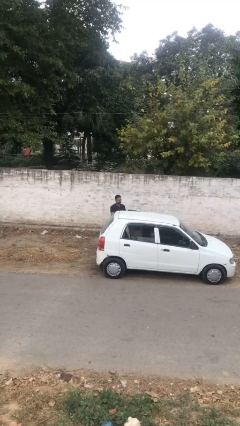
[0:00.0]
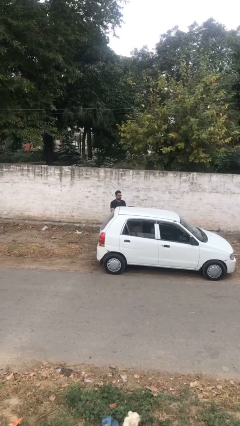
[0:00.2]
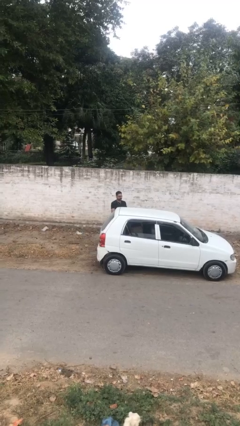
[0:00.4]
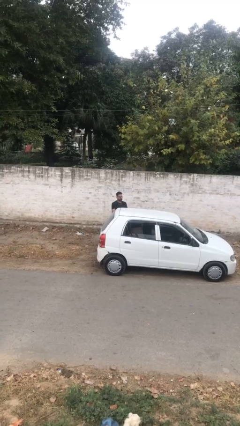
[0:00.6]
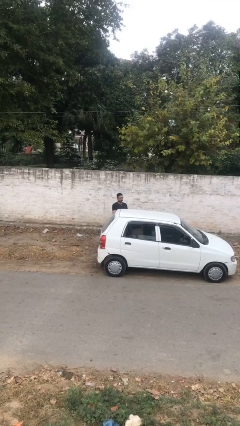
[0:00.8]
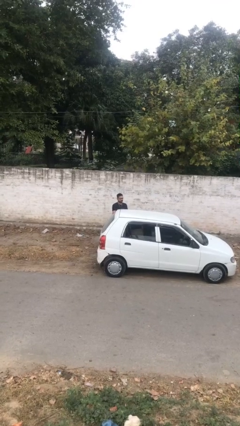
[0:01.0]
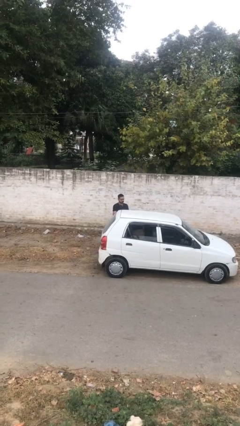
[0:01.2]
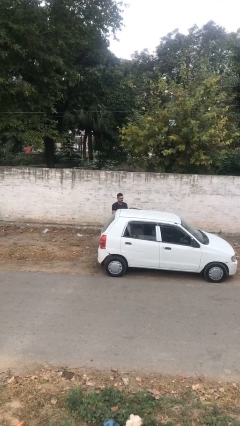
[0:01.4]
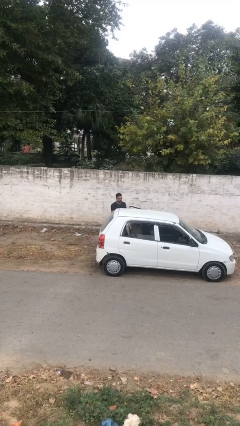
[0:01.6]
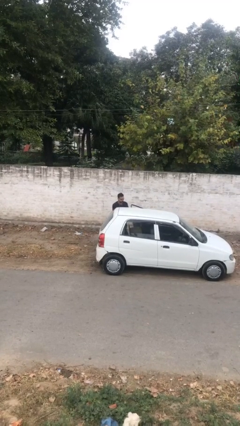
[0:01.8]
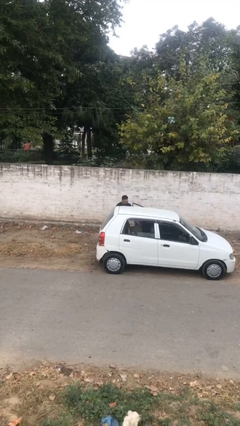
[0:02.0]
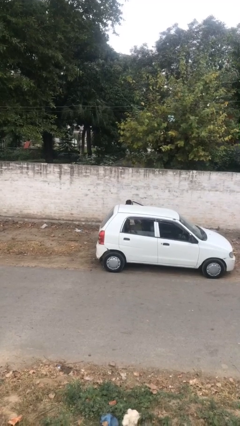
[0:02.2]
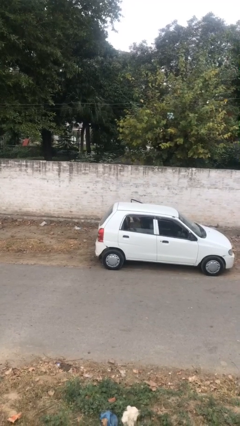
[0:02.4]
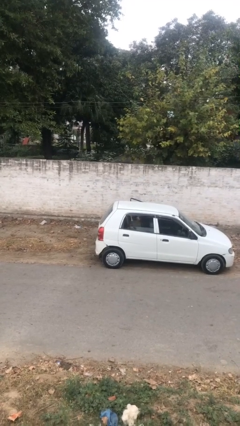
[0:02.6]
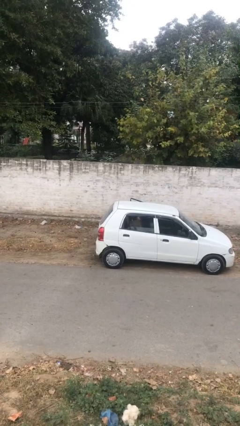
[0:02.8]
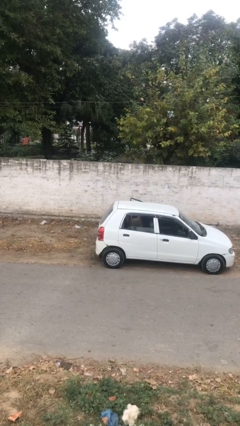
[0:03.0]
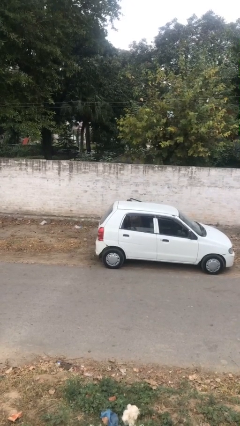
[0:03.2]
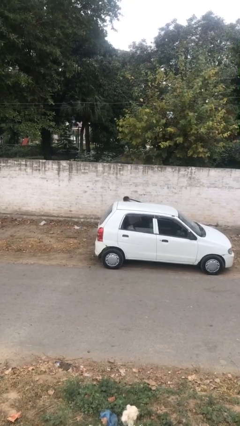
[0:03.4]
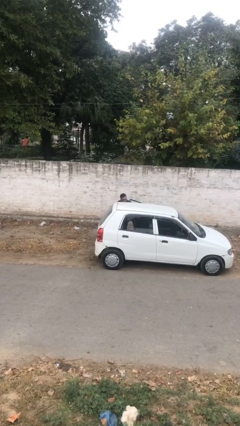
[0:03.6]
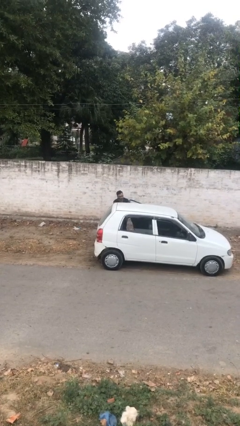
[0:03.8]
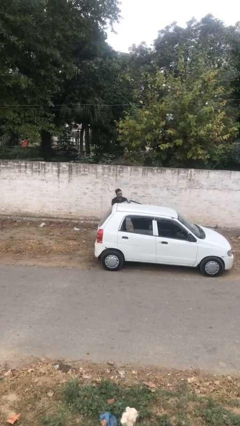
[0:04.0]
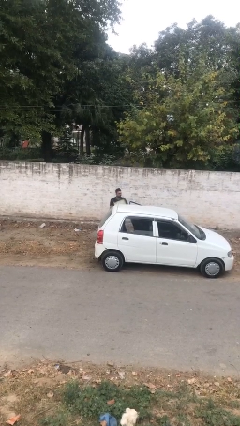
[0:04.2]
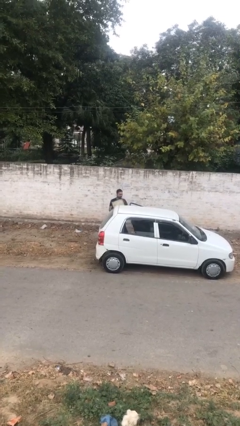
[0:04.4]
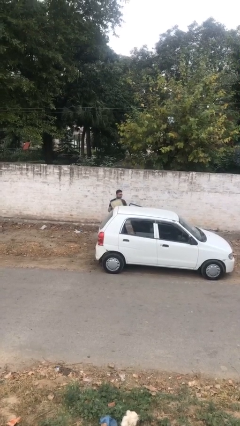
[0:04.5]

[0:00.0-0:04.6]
person unloads car

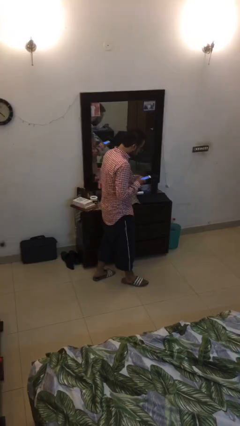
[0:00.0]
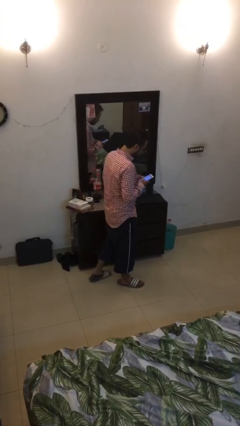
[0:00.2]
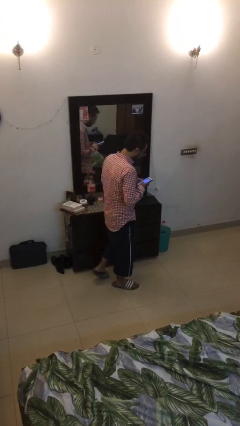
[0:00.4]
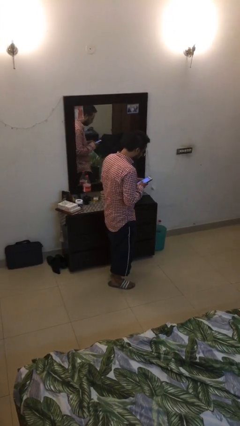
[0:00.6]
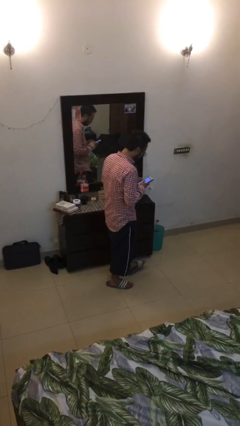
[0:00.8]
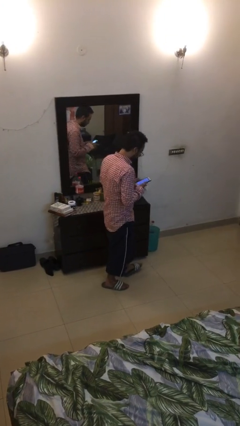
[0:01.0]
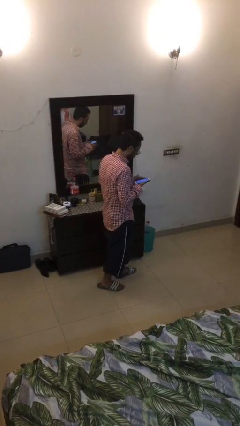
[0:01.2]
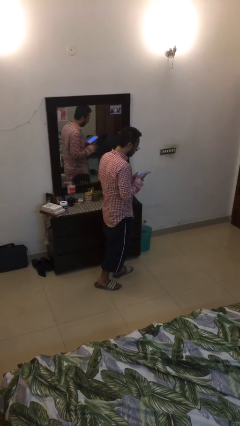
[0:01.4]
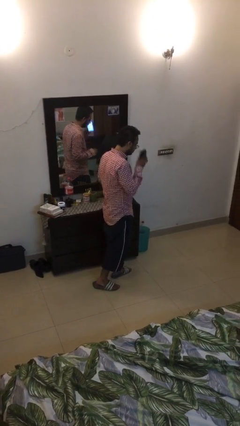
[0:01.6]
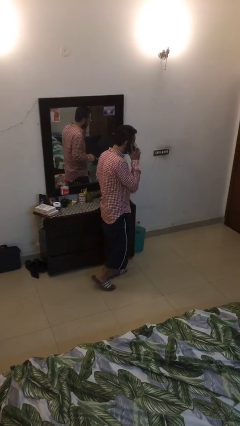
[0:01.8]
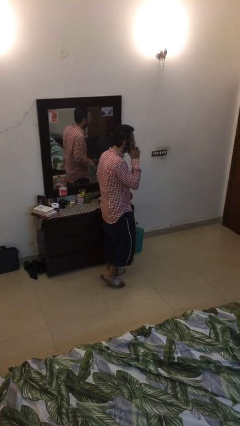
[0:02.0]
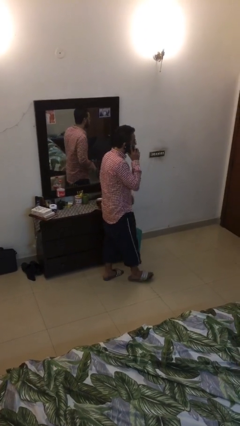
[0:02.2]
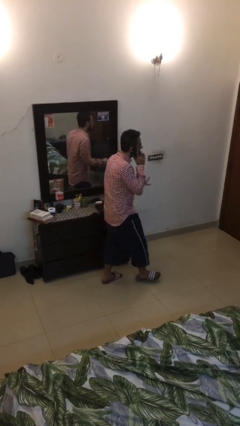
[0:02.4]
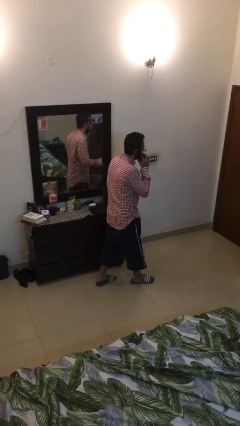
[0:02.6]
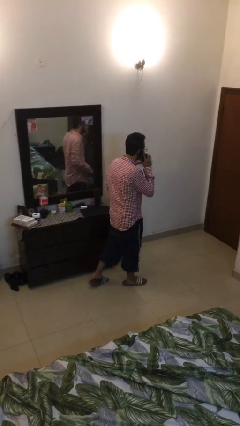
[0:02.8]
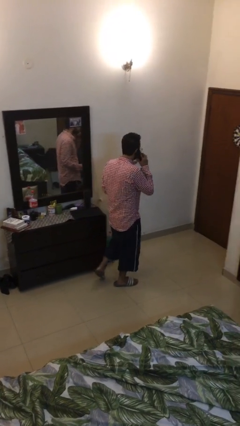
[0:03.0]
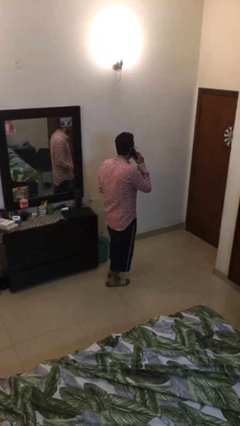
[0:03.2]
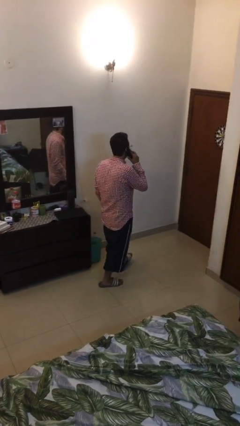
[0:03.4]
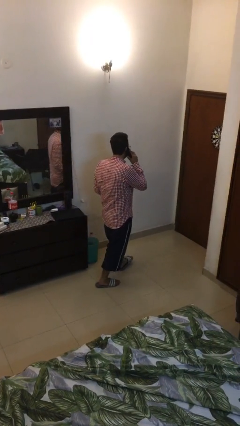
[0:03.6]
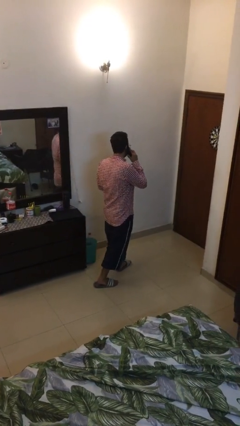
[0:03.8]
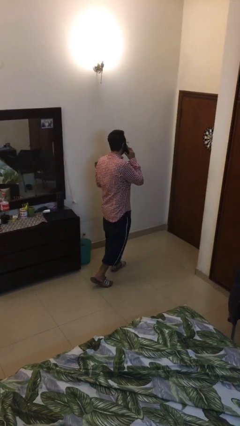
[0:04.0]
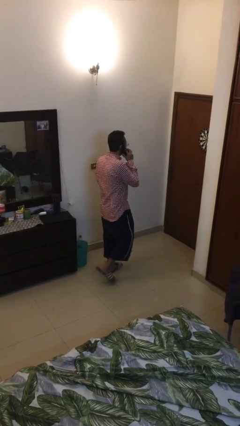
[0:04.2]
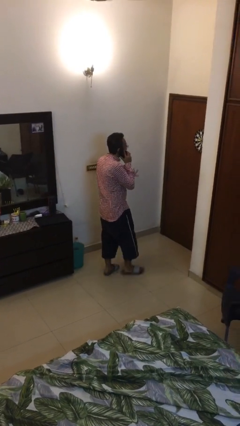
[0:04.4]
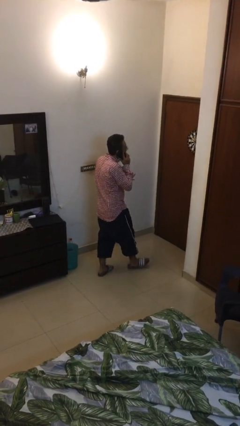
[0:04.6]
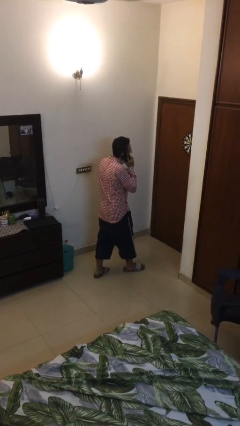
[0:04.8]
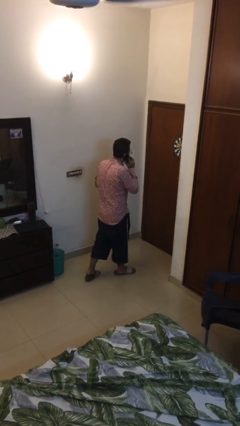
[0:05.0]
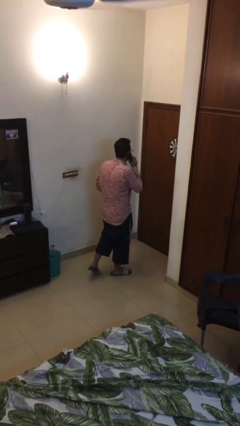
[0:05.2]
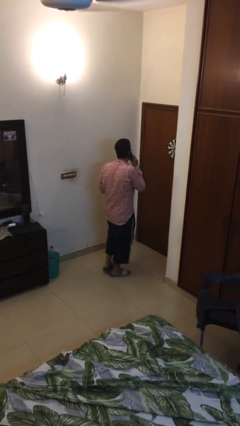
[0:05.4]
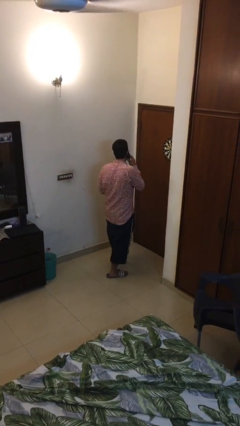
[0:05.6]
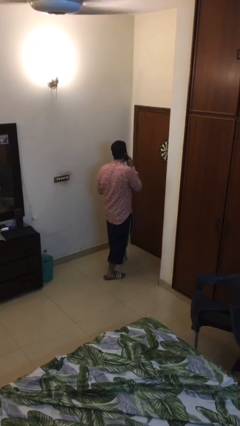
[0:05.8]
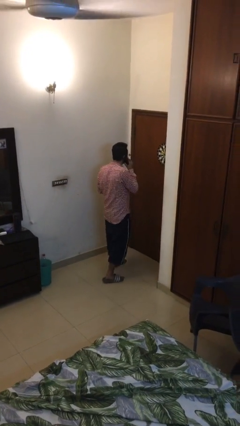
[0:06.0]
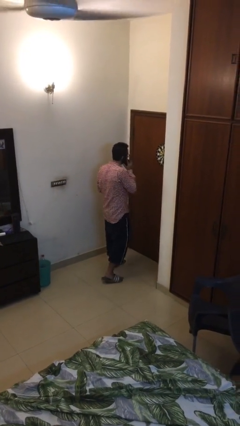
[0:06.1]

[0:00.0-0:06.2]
person talks on phone

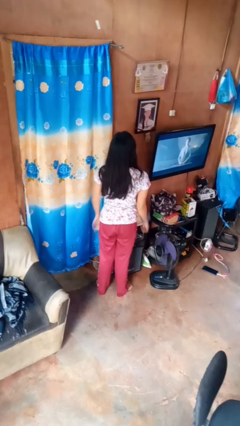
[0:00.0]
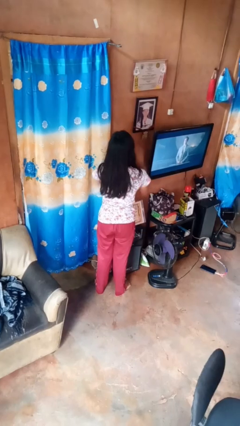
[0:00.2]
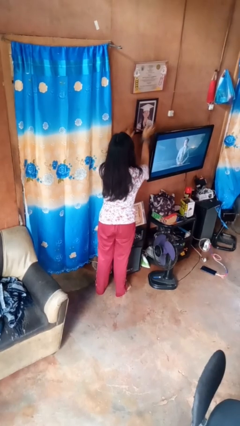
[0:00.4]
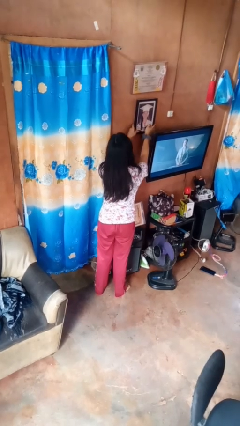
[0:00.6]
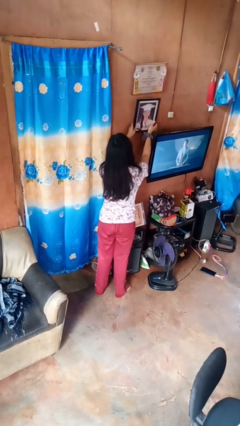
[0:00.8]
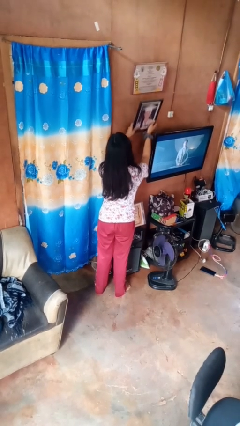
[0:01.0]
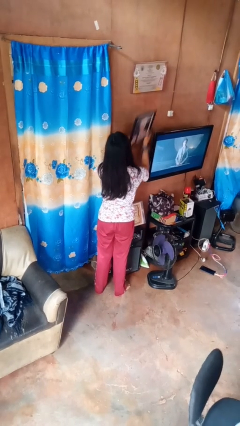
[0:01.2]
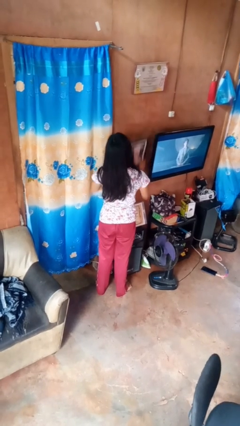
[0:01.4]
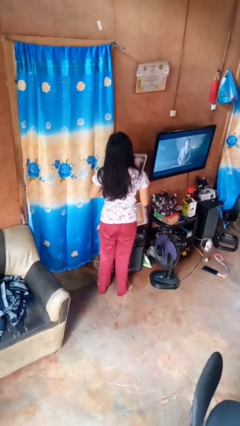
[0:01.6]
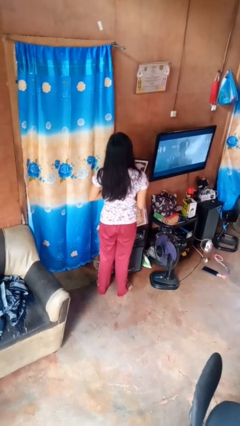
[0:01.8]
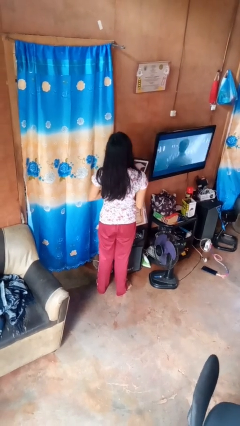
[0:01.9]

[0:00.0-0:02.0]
person takes down picture frame

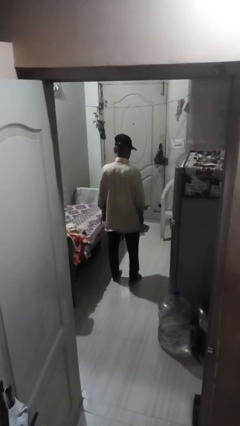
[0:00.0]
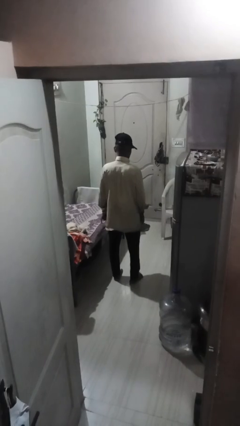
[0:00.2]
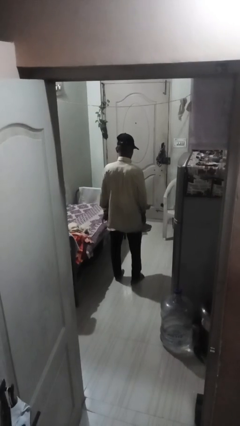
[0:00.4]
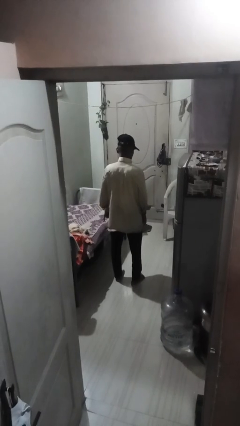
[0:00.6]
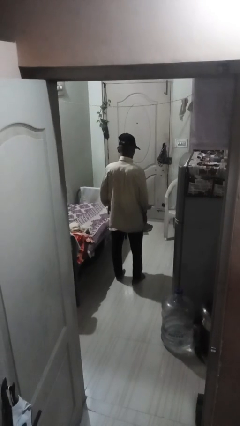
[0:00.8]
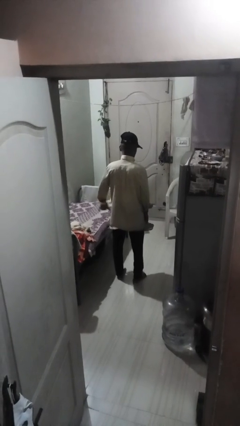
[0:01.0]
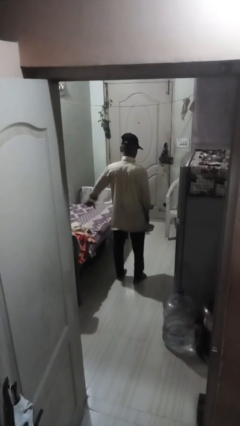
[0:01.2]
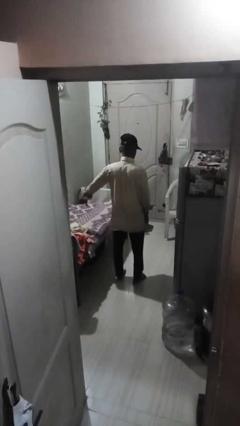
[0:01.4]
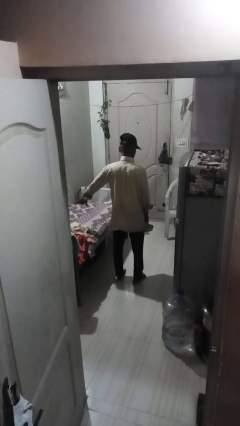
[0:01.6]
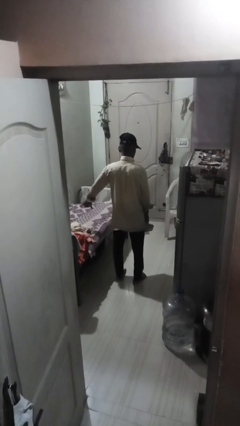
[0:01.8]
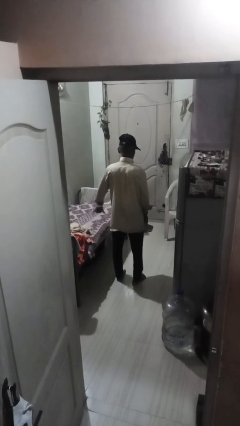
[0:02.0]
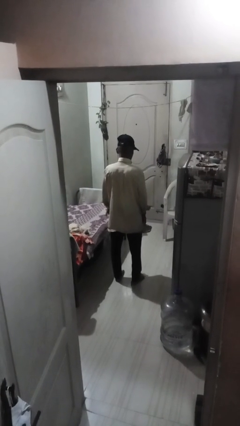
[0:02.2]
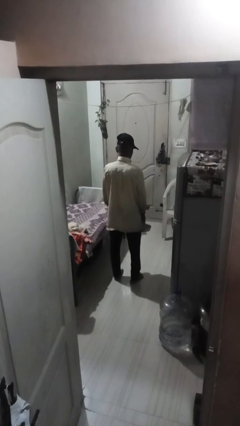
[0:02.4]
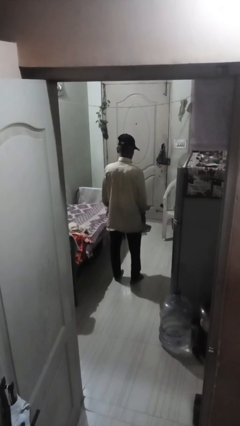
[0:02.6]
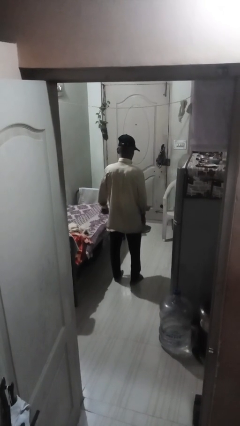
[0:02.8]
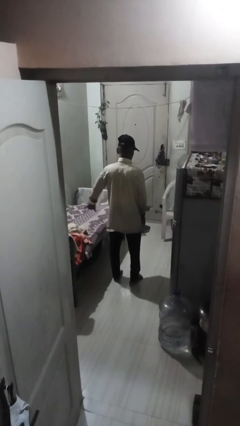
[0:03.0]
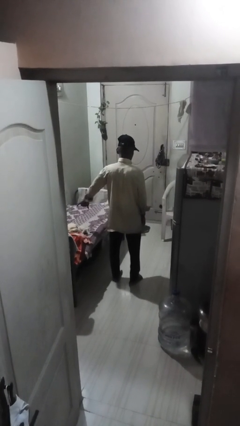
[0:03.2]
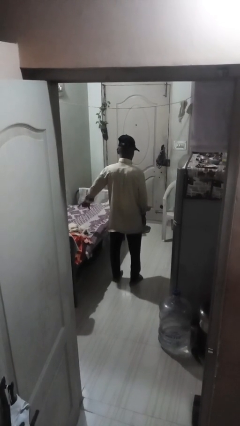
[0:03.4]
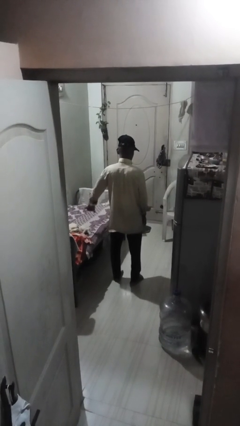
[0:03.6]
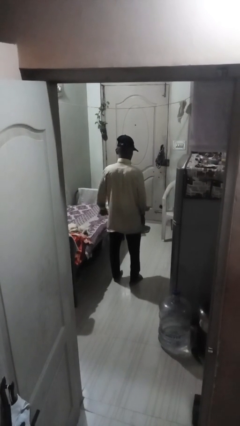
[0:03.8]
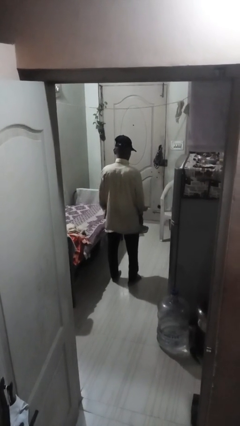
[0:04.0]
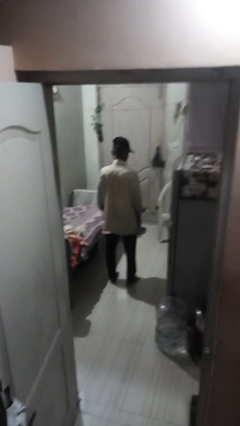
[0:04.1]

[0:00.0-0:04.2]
person gestures hang loose

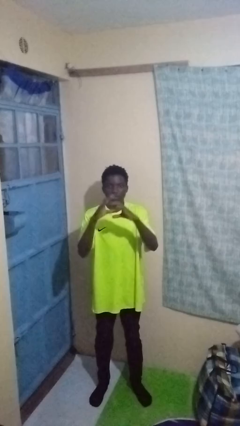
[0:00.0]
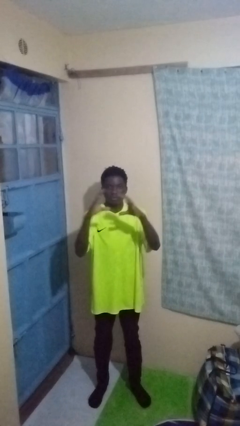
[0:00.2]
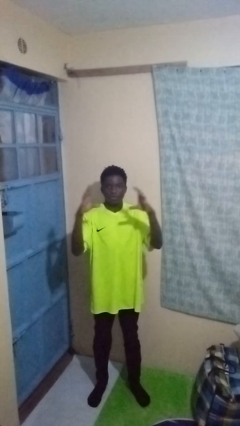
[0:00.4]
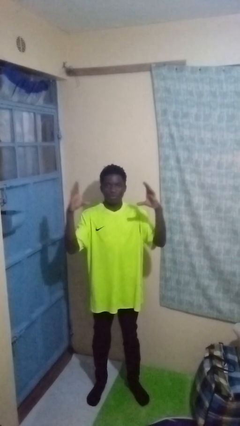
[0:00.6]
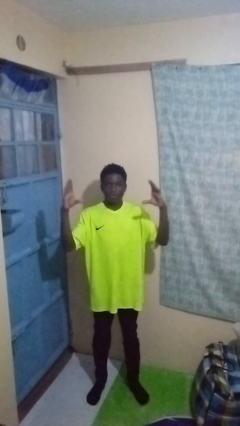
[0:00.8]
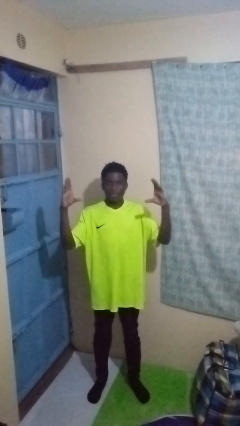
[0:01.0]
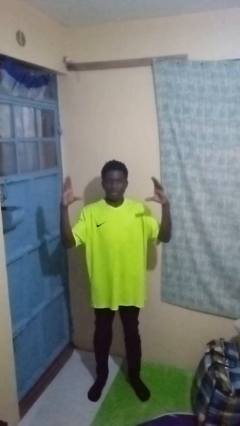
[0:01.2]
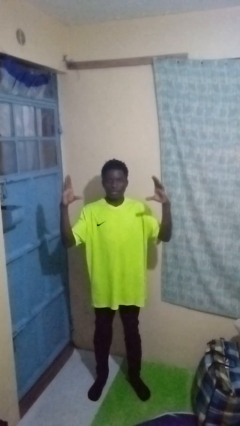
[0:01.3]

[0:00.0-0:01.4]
person gestures zoom in
